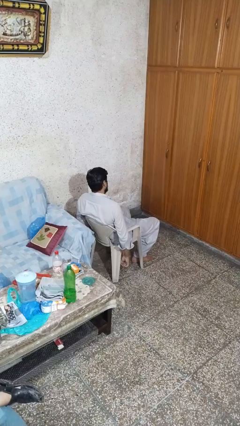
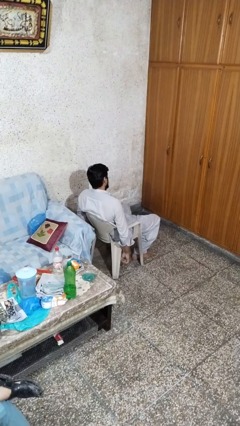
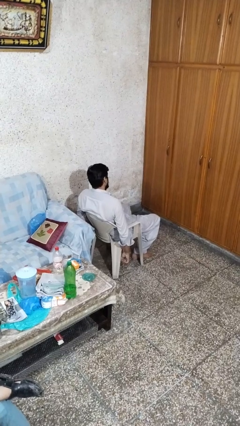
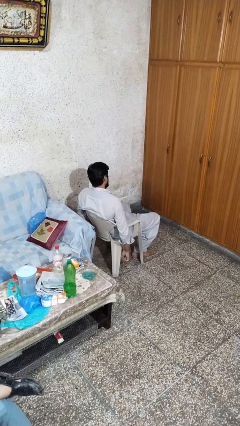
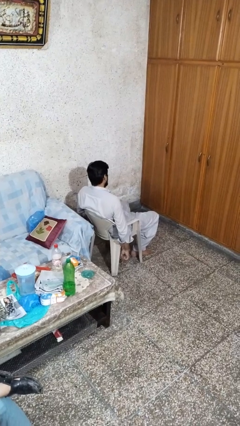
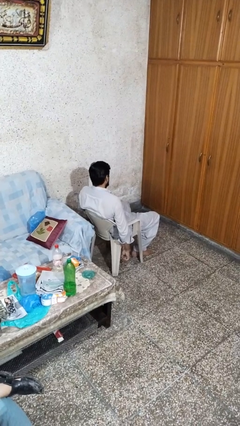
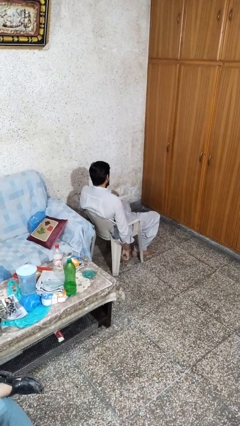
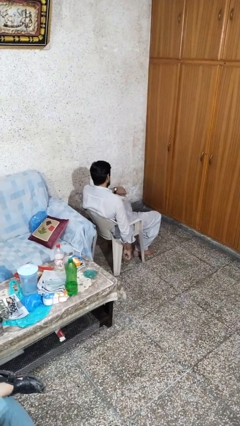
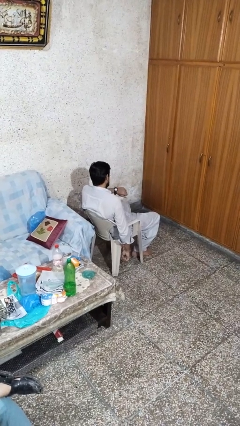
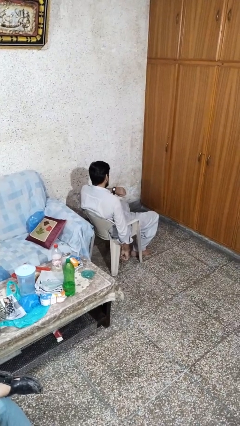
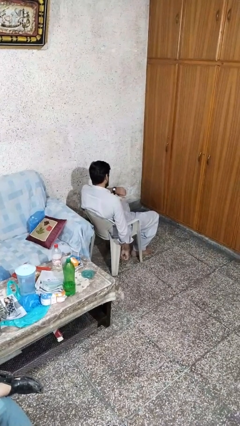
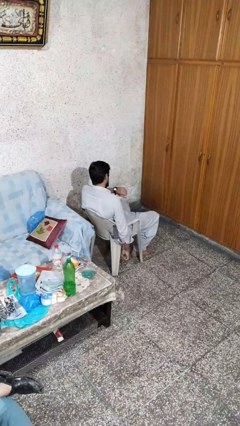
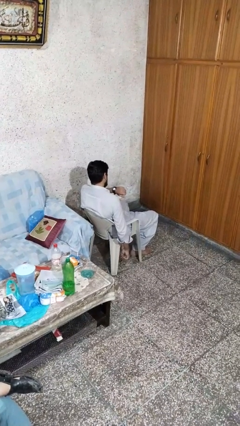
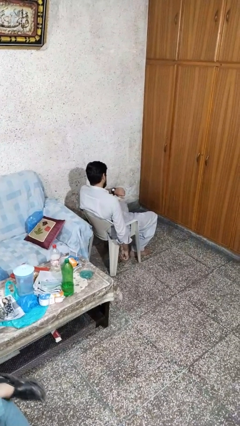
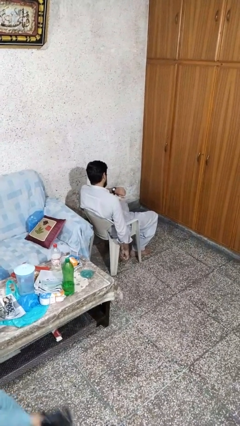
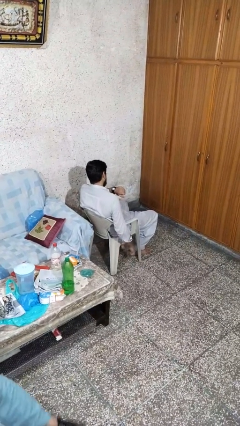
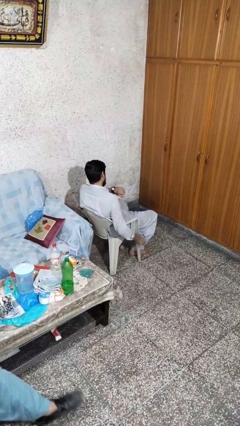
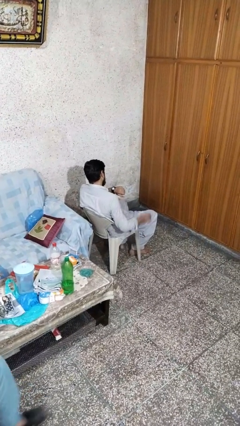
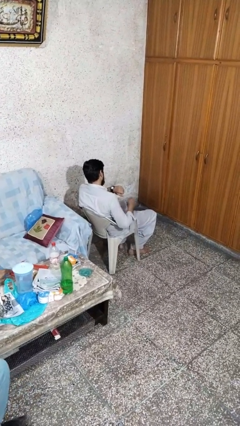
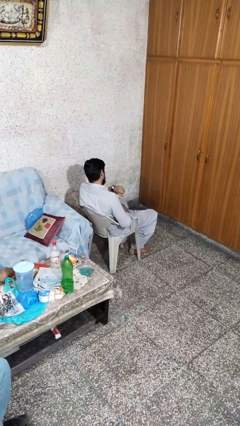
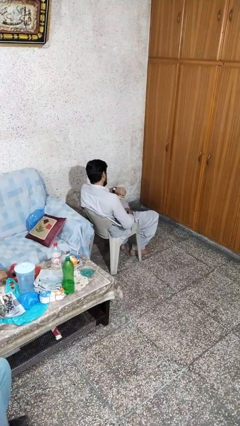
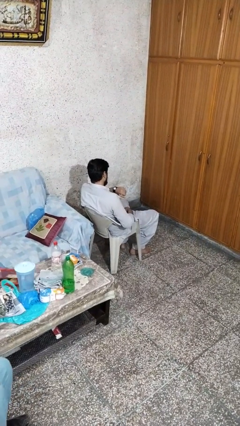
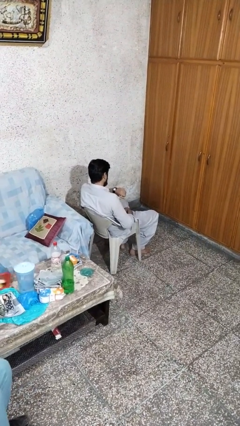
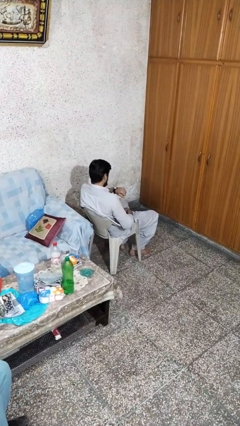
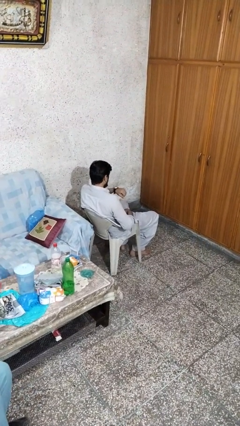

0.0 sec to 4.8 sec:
person looks at wristwatch

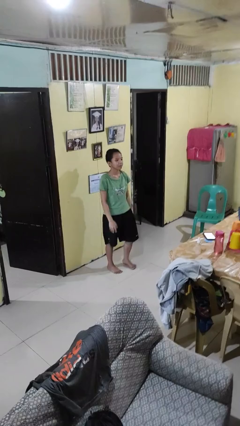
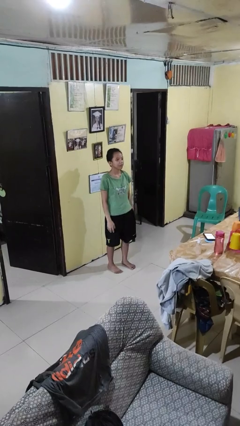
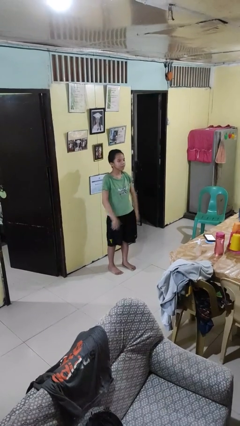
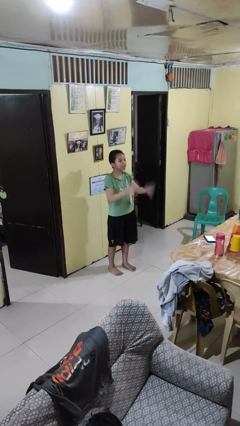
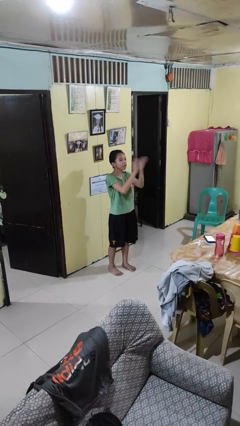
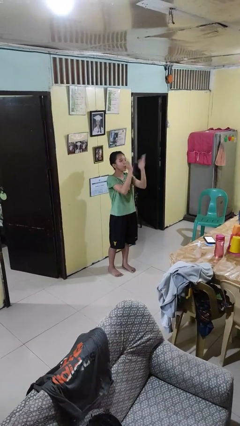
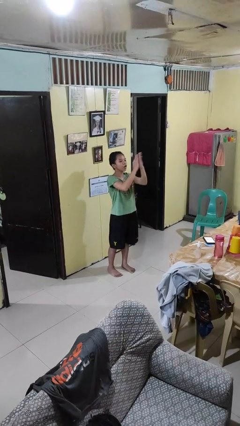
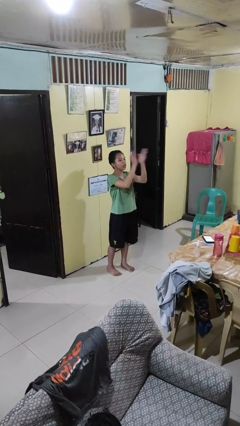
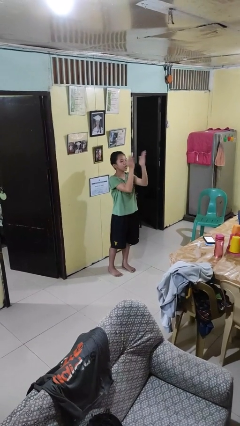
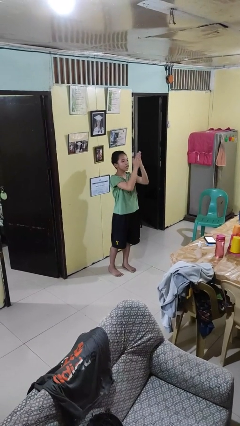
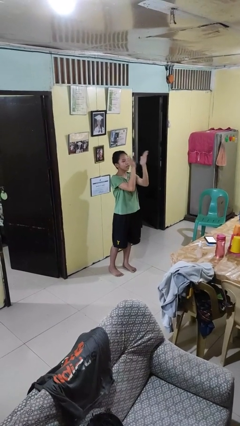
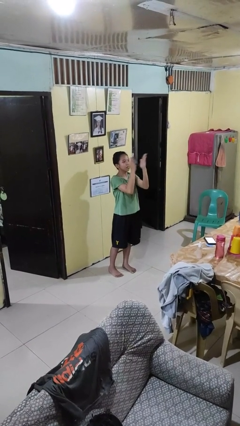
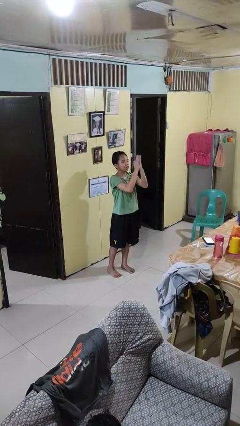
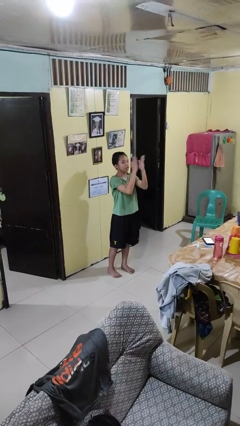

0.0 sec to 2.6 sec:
person claps hands

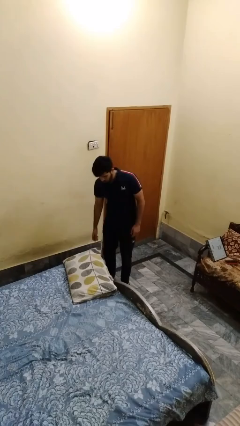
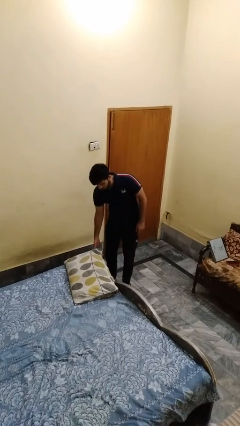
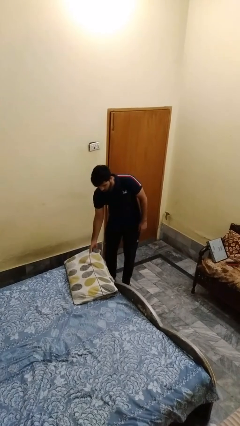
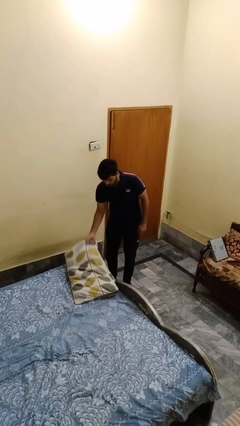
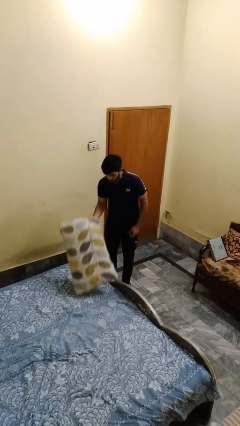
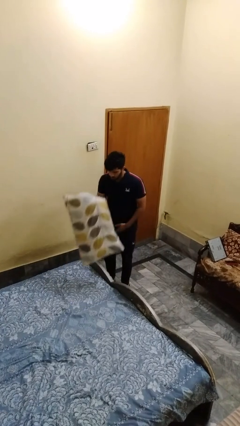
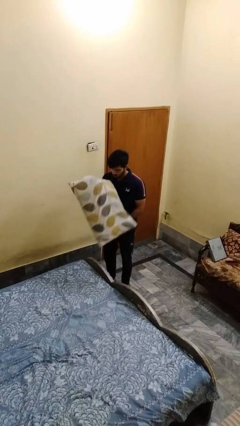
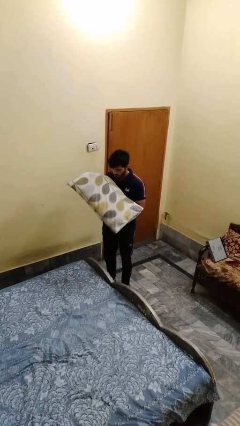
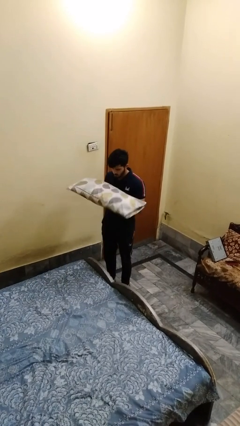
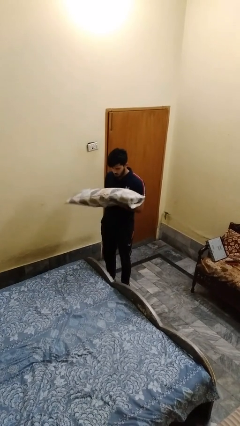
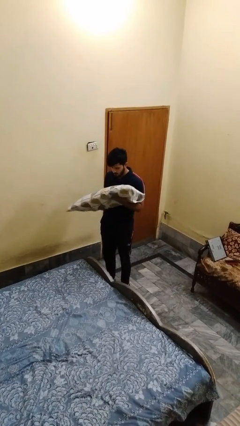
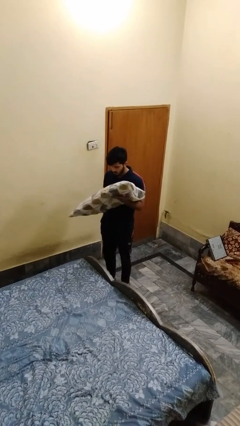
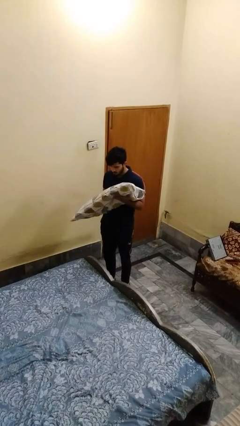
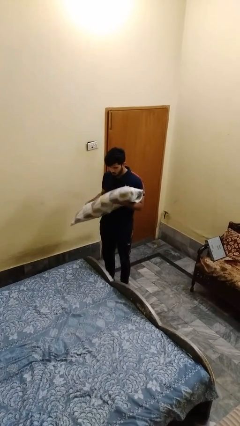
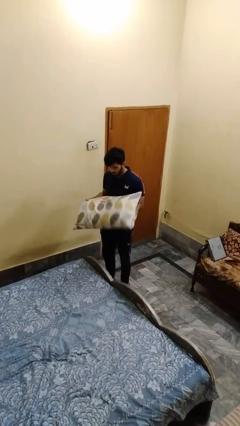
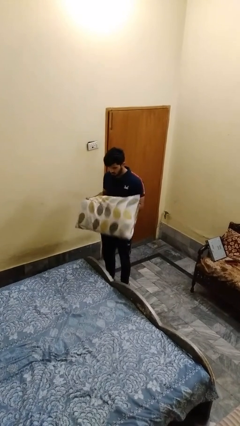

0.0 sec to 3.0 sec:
person picks up object from bed

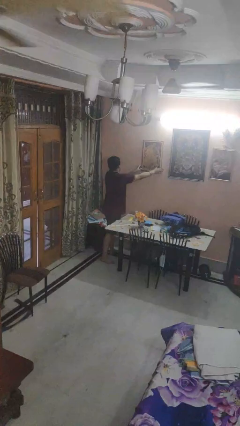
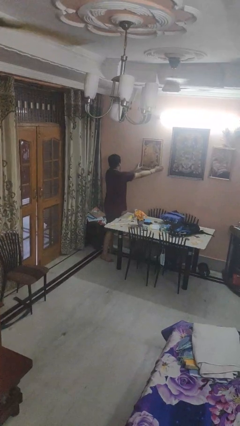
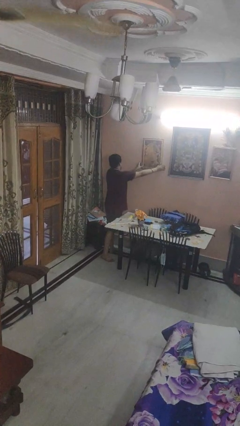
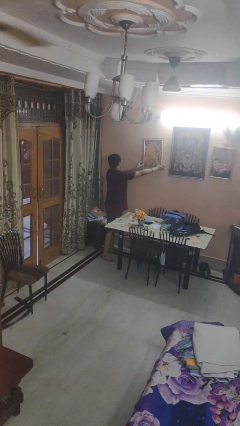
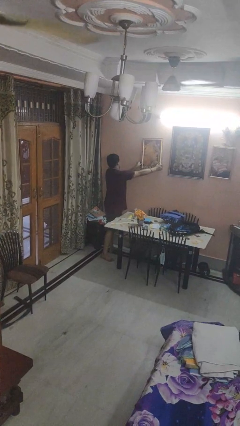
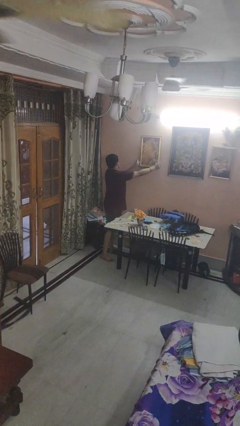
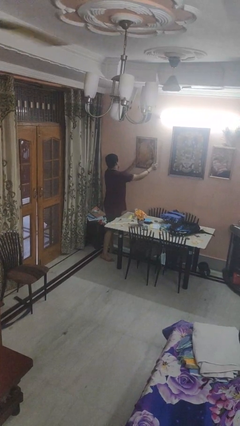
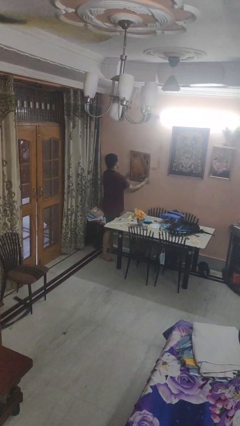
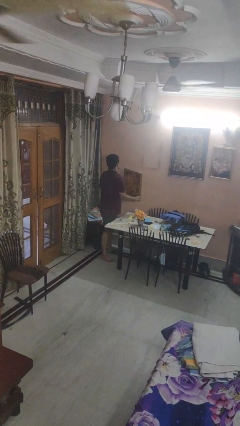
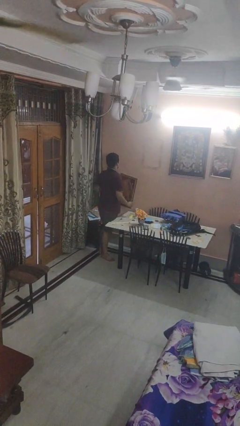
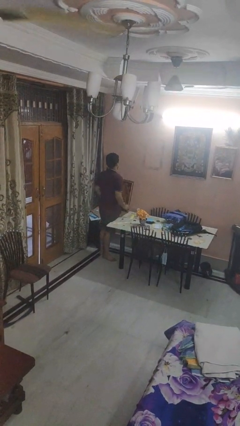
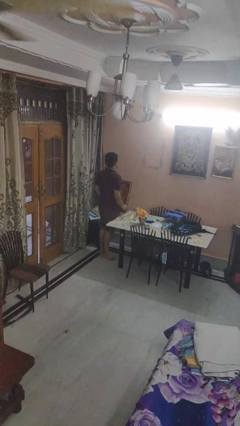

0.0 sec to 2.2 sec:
person takes down picture frame

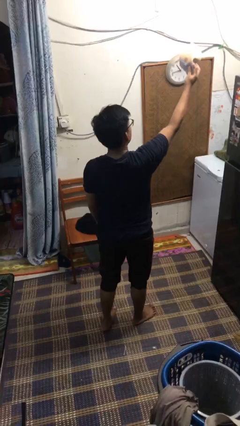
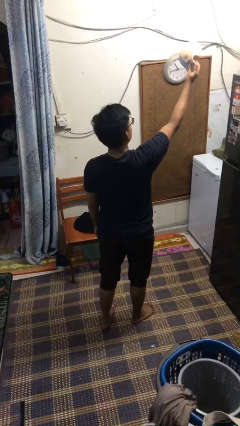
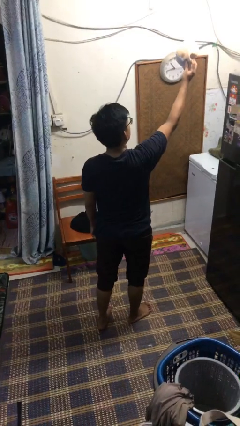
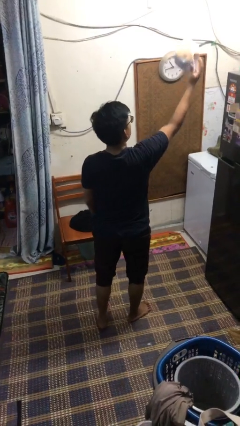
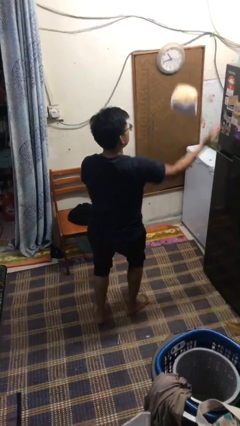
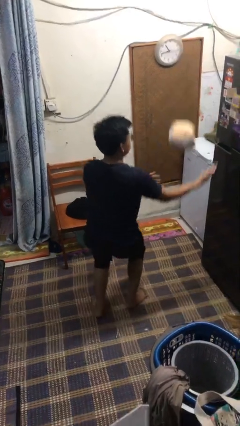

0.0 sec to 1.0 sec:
person drops object

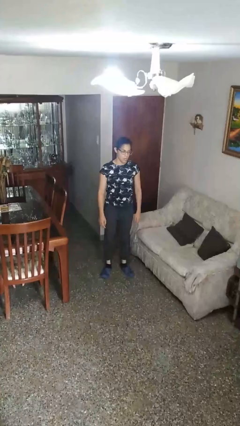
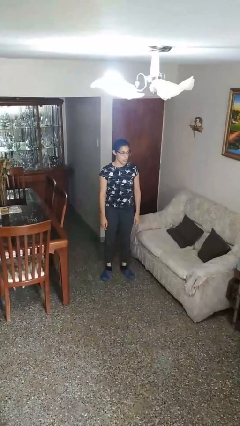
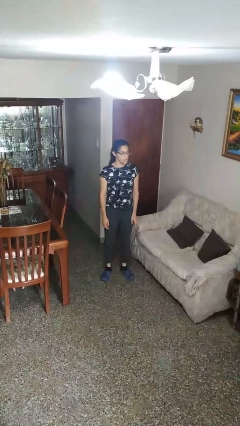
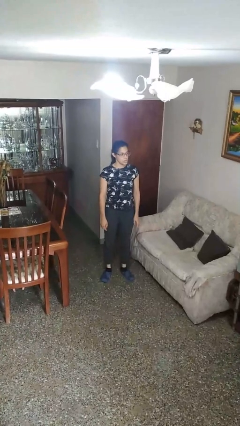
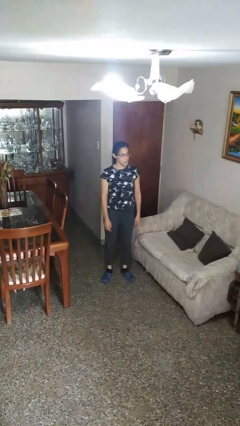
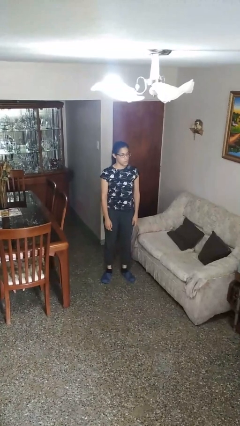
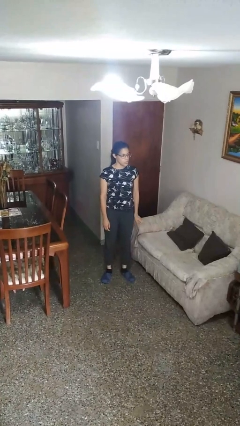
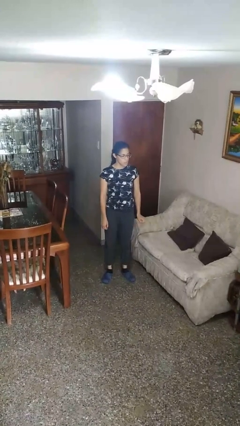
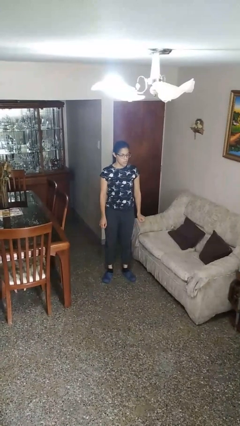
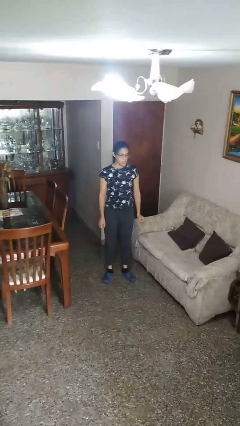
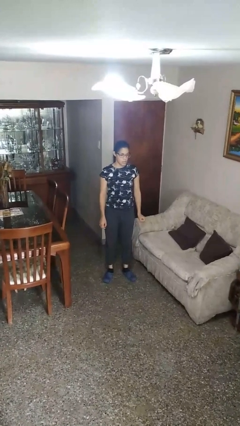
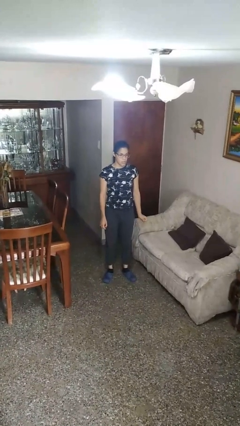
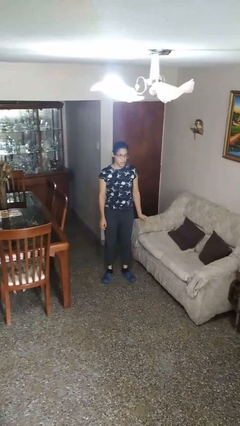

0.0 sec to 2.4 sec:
person stands up

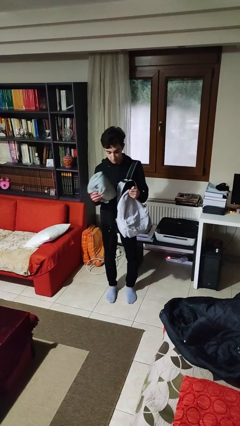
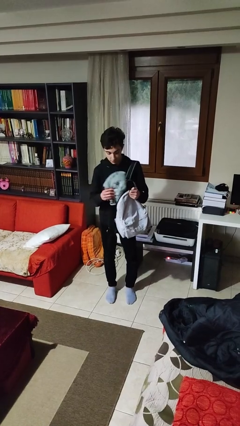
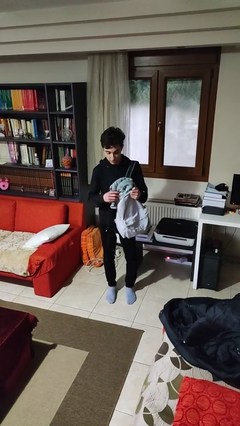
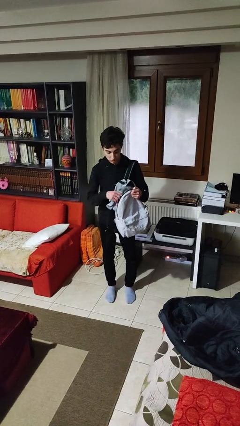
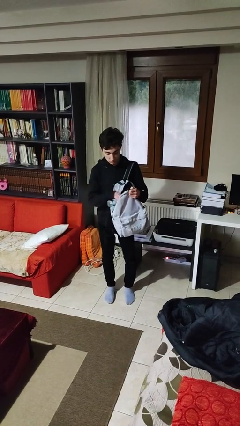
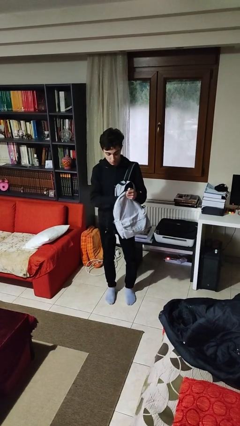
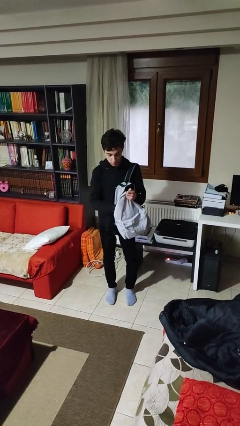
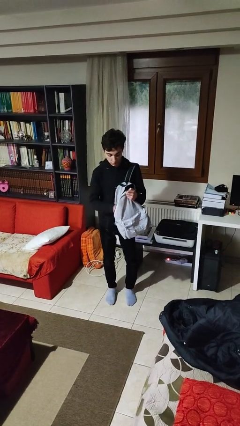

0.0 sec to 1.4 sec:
person puts object into backpack
